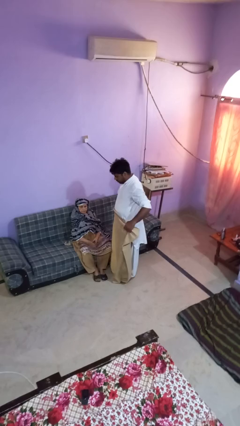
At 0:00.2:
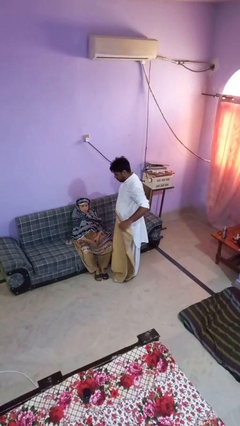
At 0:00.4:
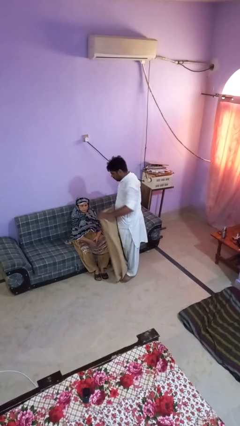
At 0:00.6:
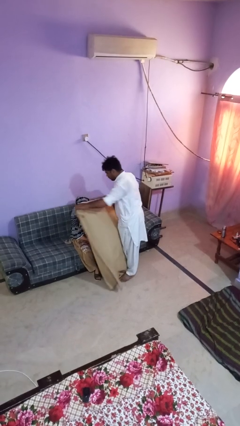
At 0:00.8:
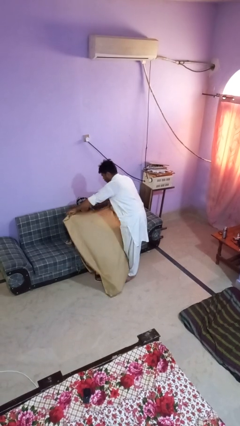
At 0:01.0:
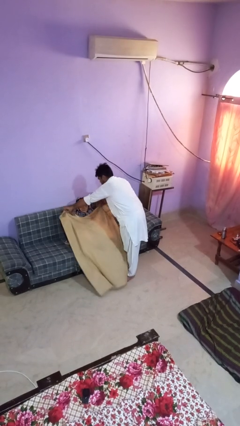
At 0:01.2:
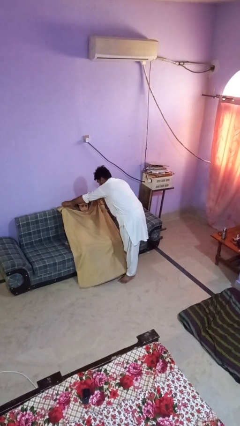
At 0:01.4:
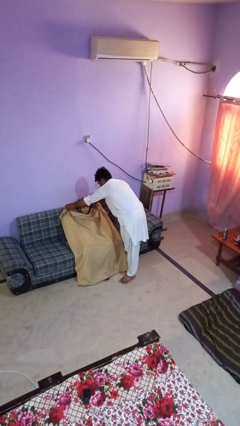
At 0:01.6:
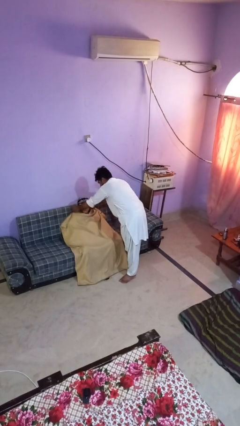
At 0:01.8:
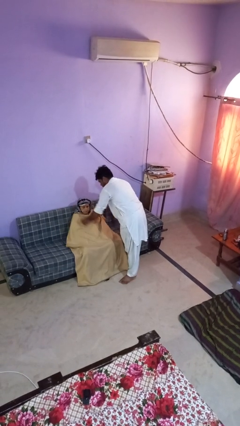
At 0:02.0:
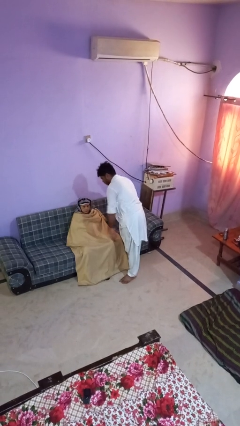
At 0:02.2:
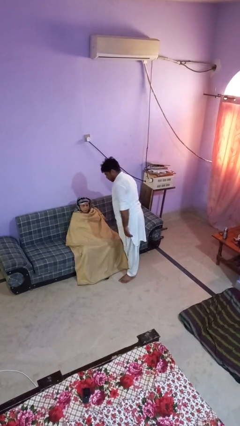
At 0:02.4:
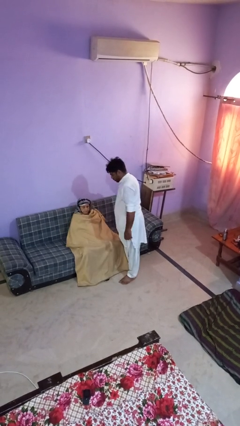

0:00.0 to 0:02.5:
person covers friend with blanket

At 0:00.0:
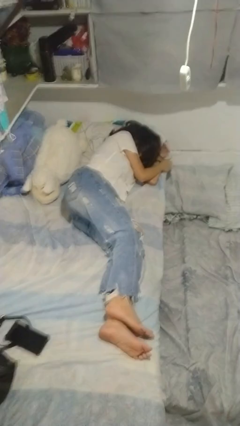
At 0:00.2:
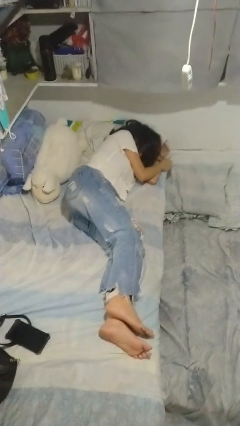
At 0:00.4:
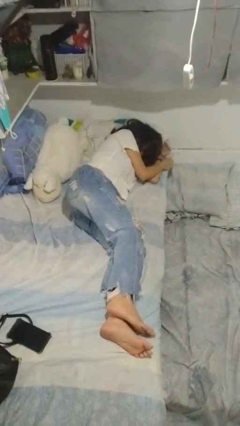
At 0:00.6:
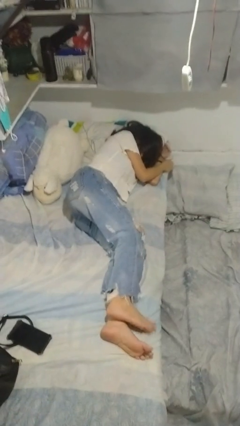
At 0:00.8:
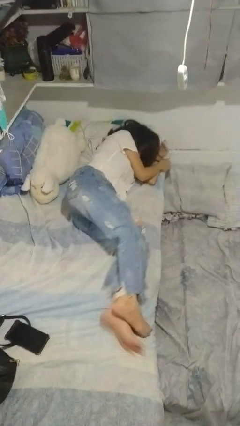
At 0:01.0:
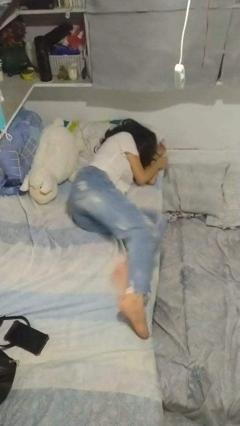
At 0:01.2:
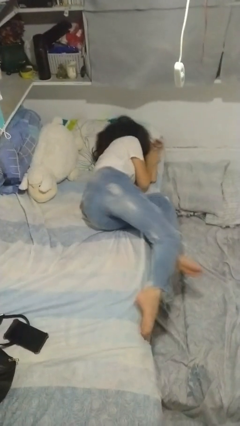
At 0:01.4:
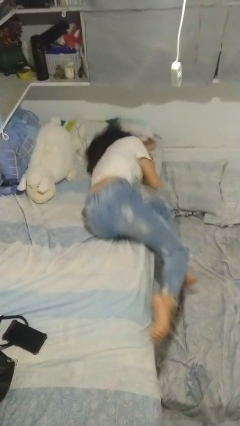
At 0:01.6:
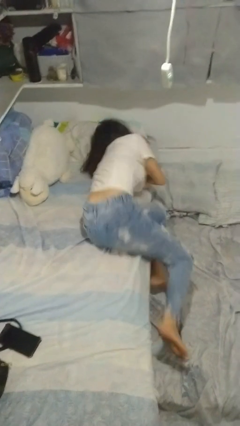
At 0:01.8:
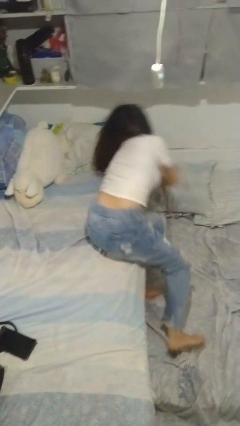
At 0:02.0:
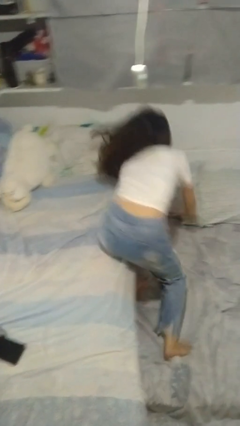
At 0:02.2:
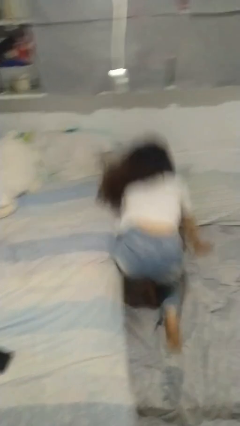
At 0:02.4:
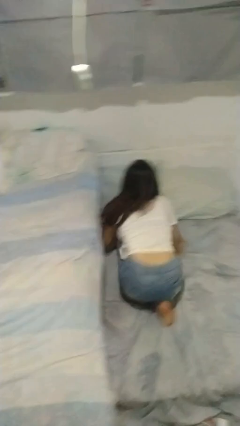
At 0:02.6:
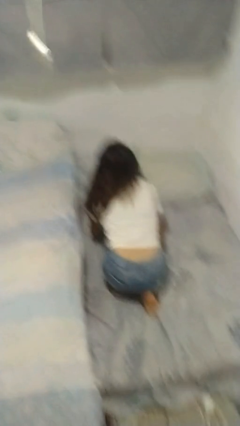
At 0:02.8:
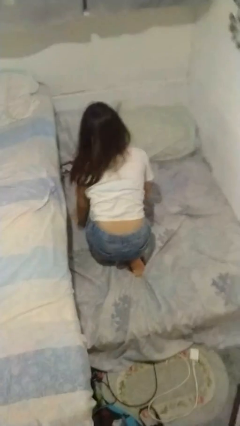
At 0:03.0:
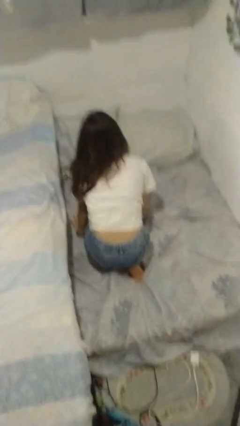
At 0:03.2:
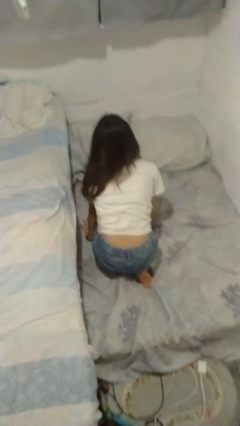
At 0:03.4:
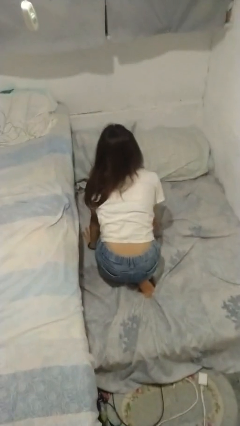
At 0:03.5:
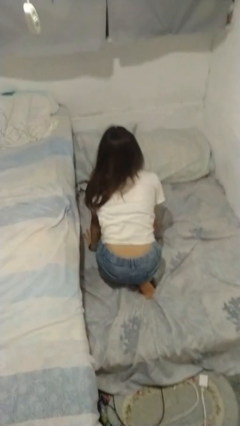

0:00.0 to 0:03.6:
person falls from bed

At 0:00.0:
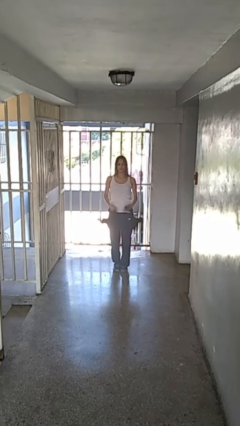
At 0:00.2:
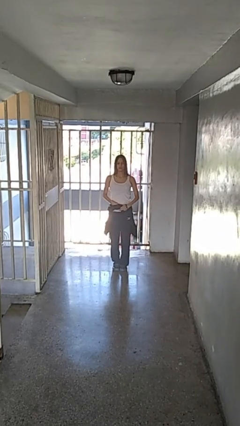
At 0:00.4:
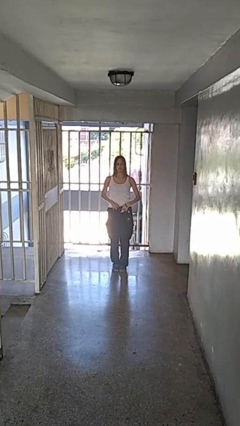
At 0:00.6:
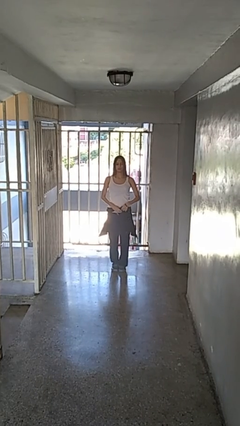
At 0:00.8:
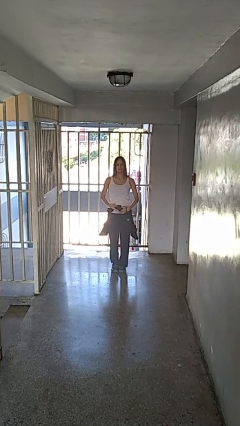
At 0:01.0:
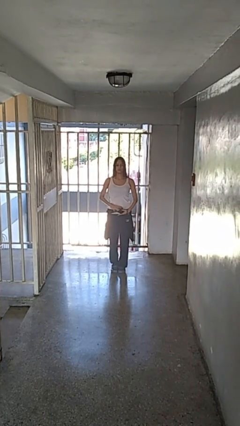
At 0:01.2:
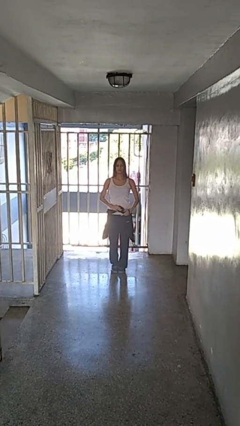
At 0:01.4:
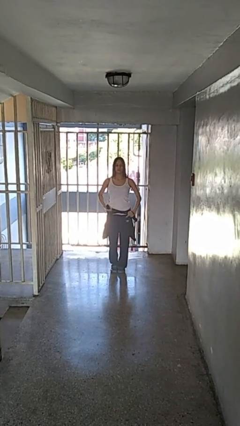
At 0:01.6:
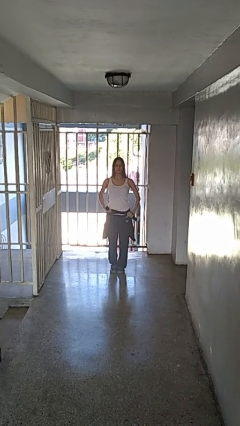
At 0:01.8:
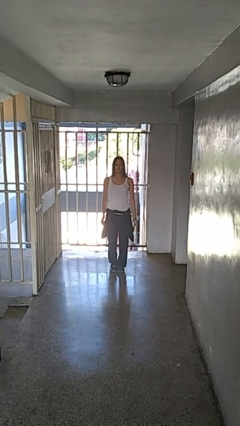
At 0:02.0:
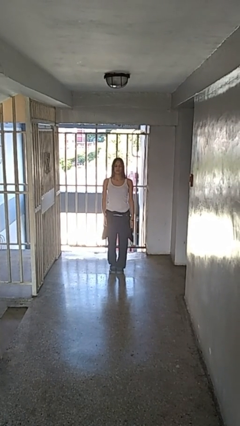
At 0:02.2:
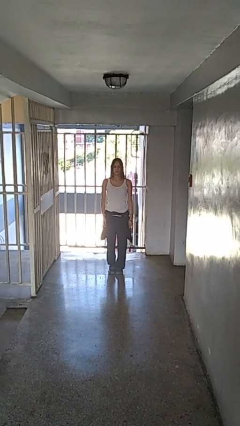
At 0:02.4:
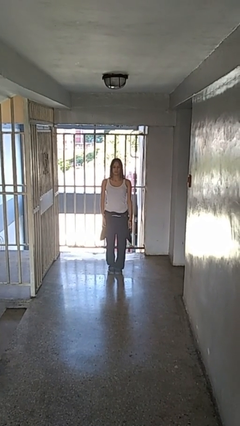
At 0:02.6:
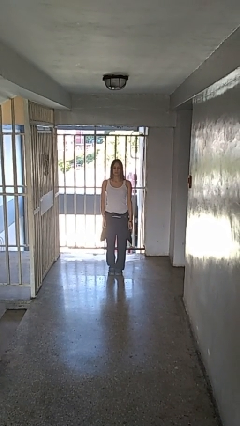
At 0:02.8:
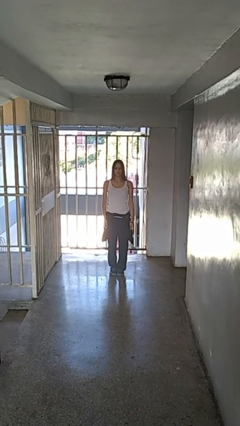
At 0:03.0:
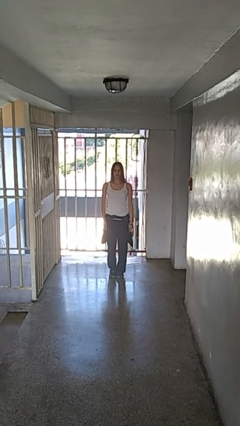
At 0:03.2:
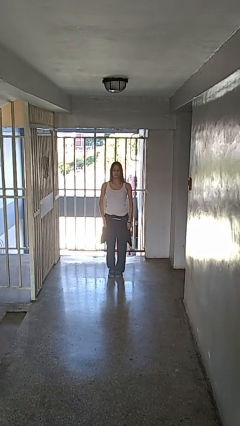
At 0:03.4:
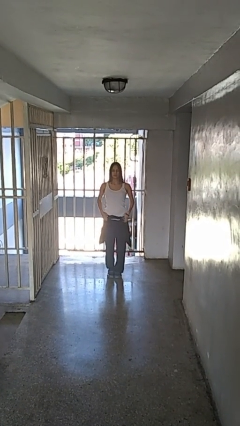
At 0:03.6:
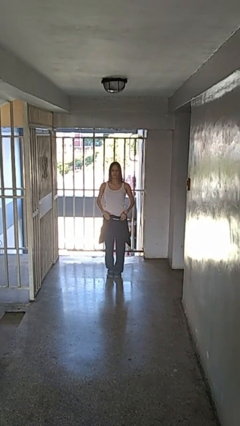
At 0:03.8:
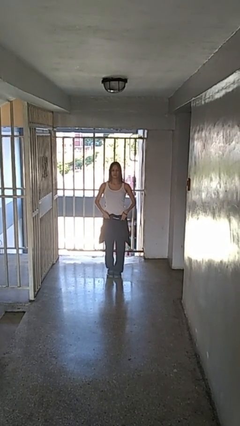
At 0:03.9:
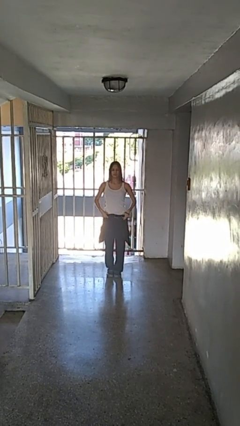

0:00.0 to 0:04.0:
person ties jacket around waist

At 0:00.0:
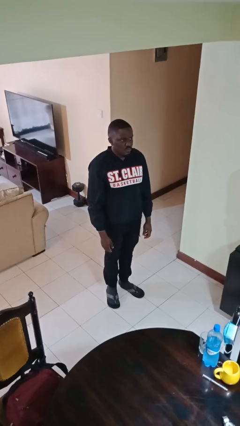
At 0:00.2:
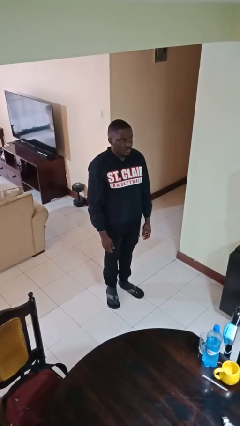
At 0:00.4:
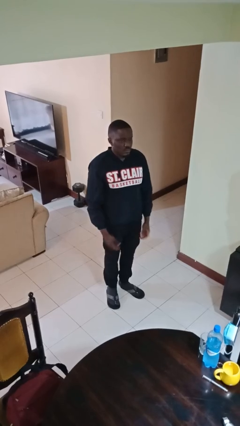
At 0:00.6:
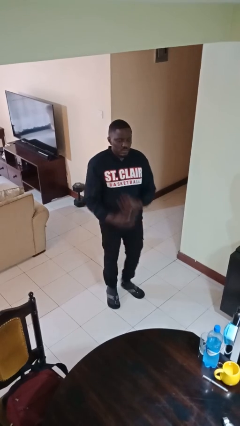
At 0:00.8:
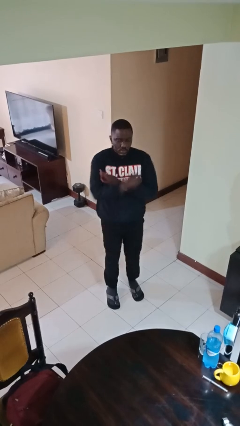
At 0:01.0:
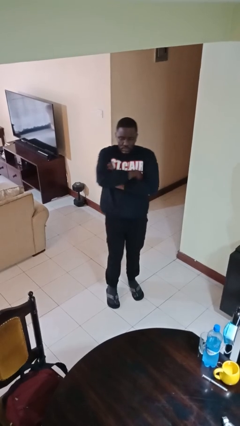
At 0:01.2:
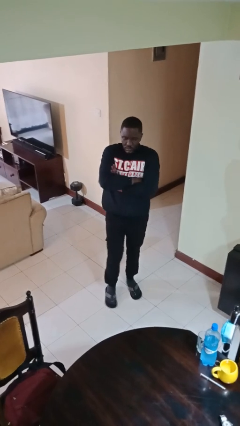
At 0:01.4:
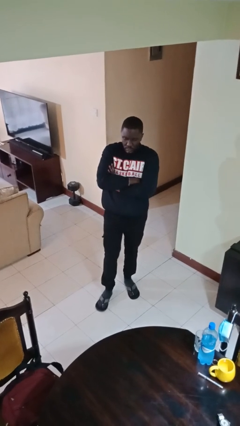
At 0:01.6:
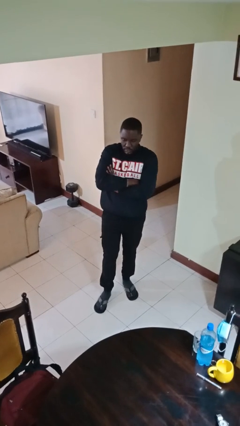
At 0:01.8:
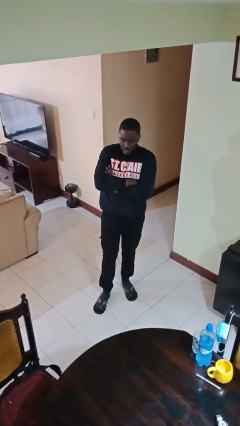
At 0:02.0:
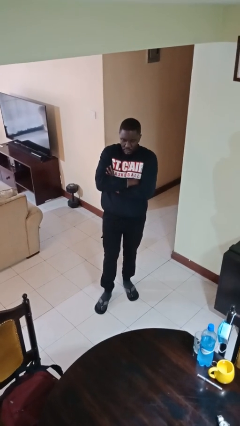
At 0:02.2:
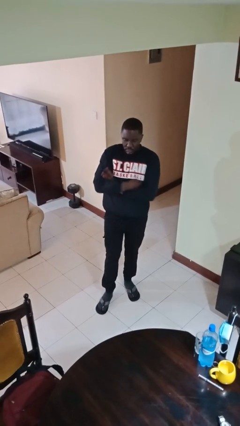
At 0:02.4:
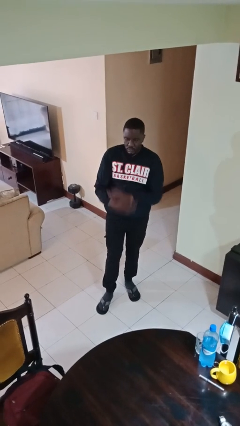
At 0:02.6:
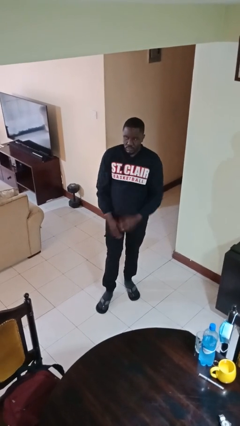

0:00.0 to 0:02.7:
person crosses arms

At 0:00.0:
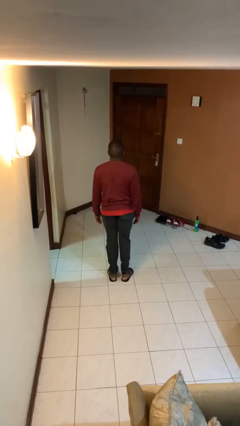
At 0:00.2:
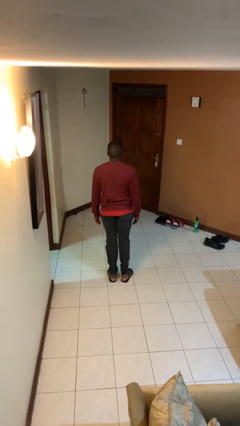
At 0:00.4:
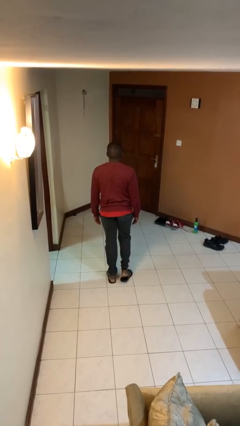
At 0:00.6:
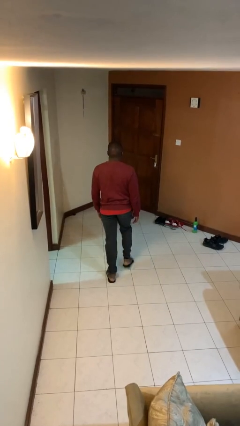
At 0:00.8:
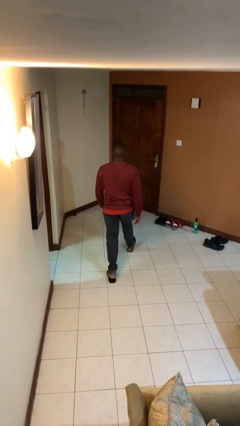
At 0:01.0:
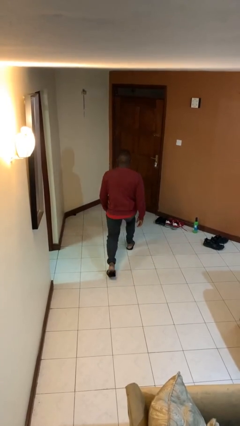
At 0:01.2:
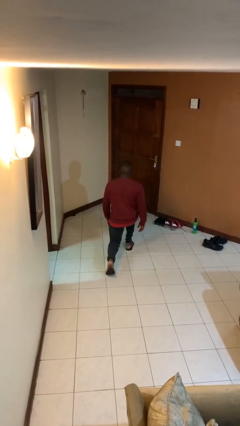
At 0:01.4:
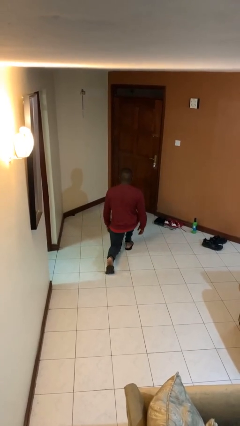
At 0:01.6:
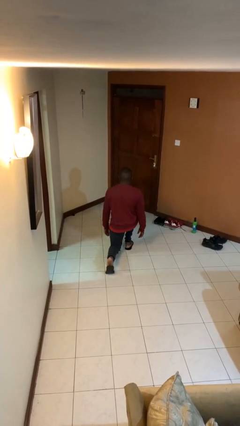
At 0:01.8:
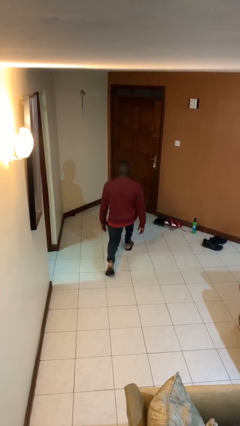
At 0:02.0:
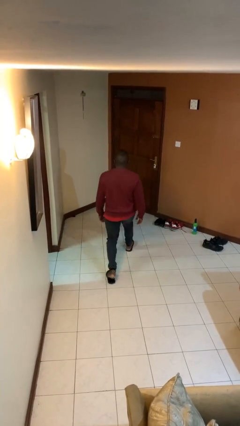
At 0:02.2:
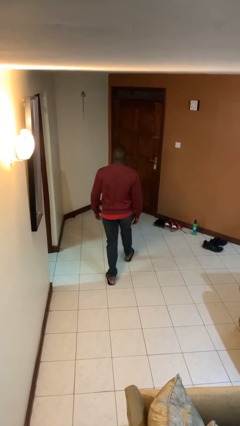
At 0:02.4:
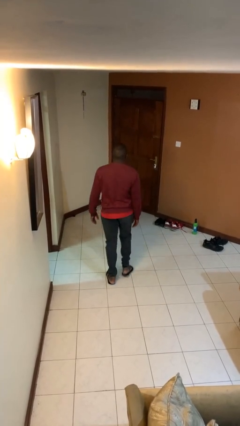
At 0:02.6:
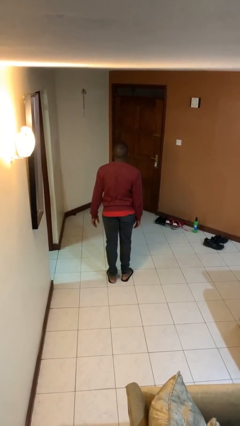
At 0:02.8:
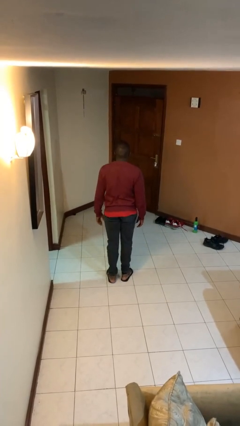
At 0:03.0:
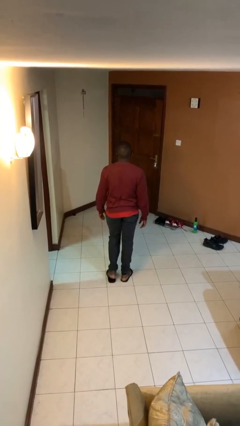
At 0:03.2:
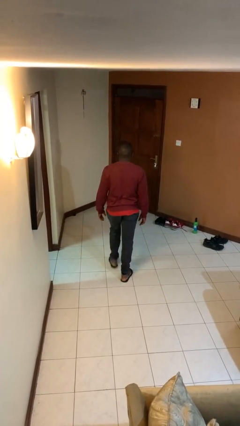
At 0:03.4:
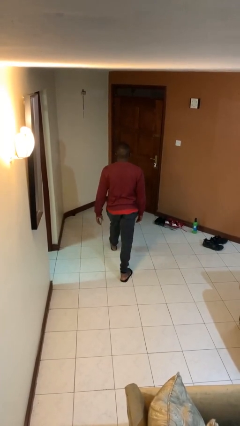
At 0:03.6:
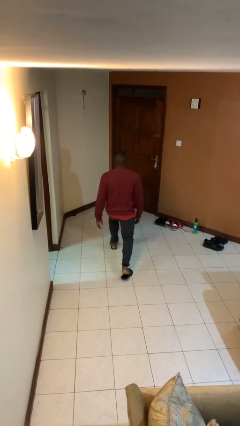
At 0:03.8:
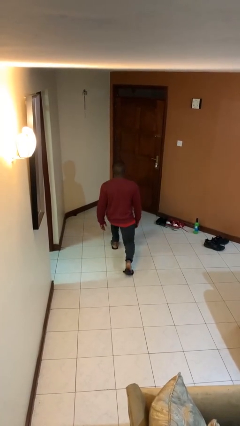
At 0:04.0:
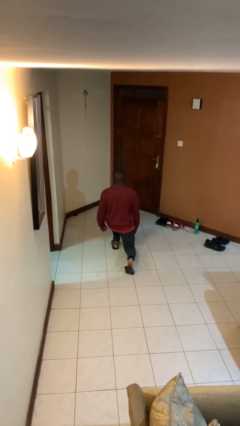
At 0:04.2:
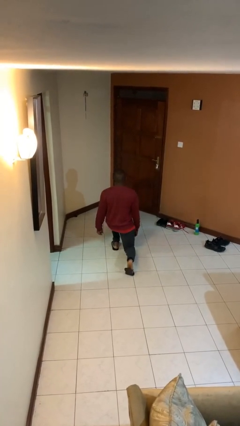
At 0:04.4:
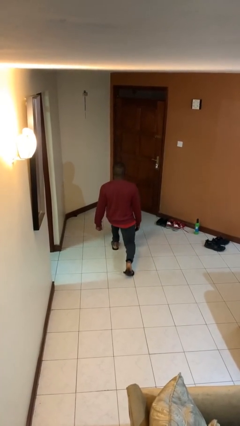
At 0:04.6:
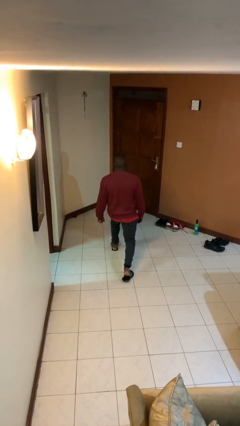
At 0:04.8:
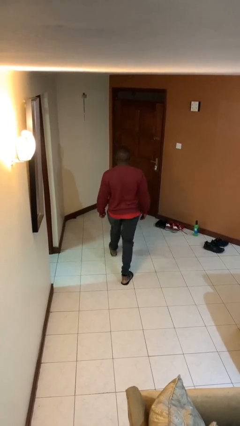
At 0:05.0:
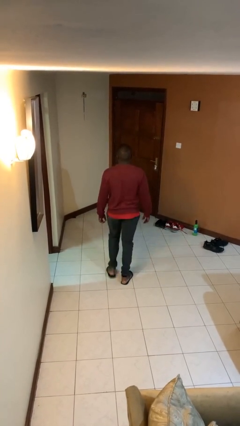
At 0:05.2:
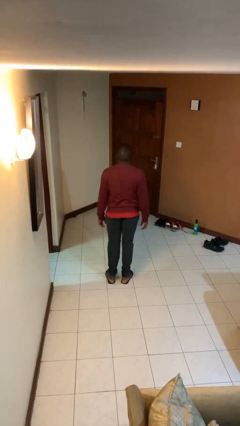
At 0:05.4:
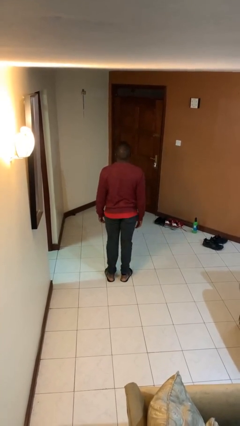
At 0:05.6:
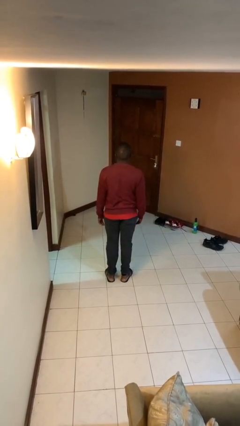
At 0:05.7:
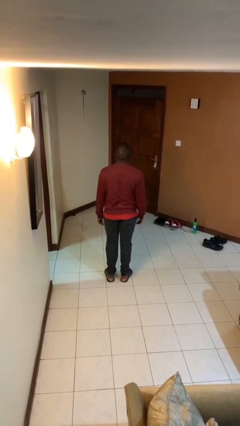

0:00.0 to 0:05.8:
person exercises with lunges
